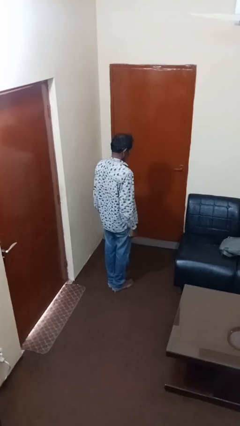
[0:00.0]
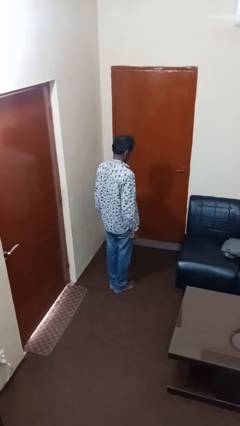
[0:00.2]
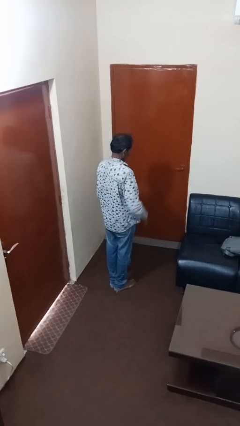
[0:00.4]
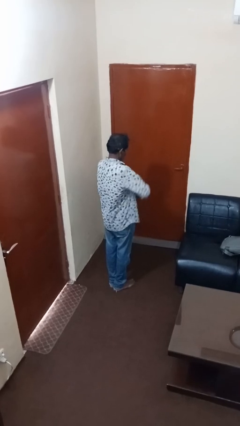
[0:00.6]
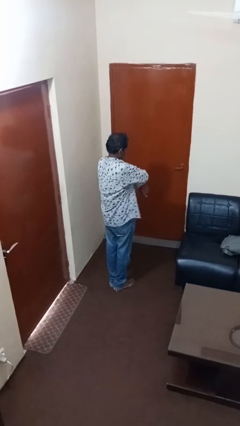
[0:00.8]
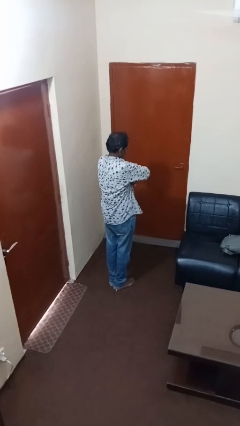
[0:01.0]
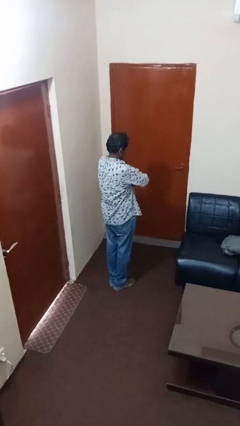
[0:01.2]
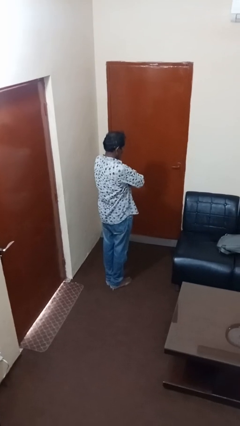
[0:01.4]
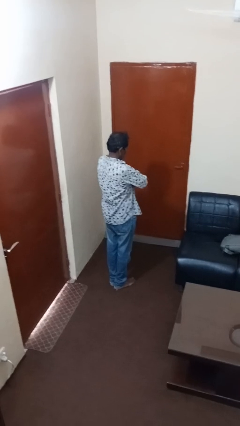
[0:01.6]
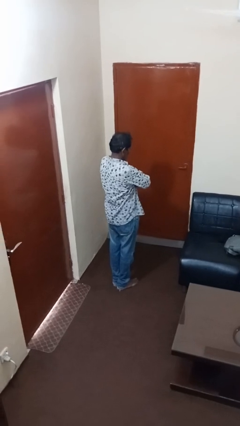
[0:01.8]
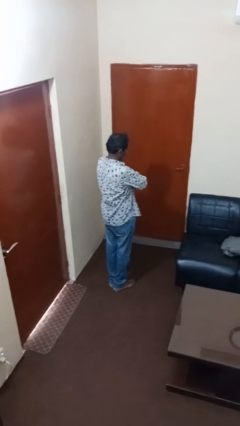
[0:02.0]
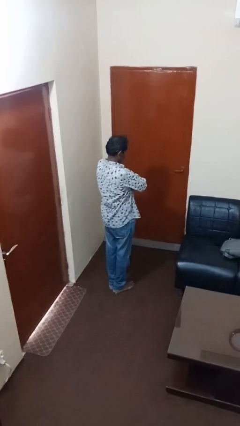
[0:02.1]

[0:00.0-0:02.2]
person crosses arms

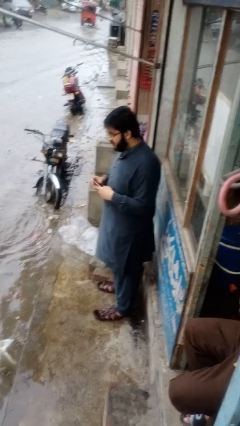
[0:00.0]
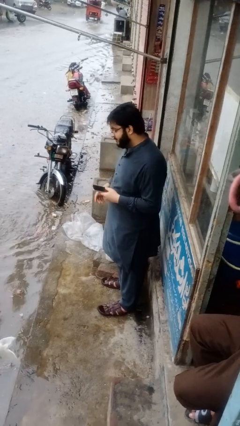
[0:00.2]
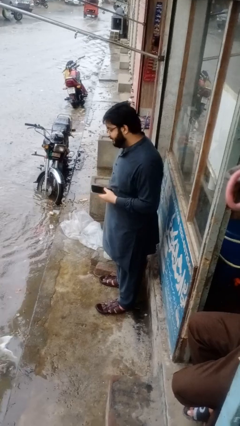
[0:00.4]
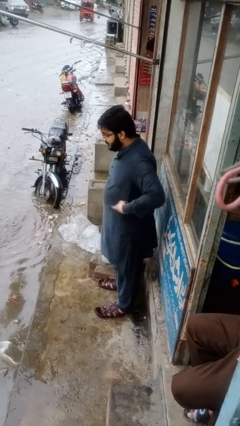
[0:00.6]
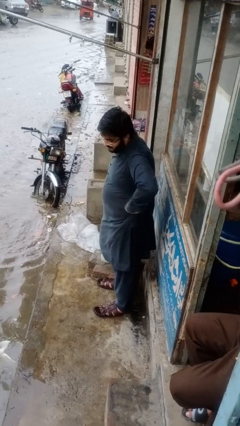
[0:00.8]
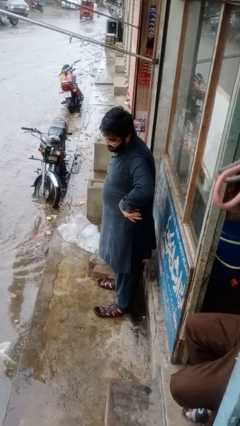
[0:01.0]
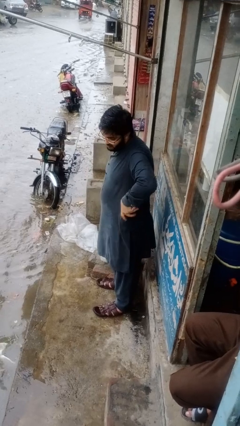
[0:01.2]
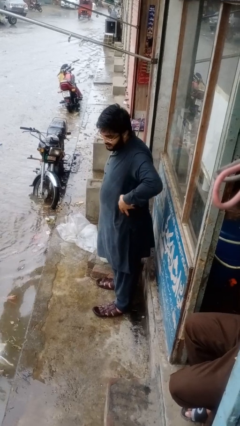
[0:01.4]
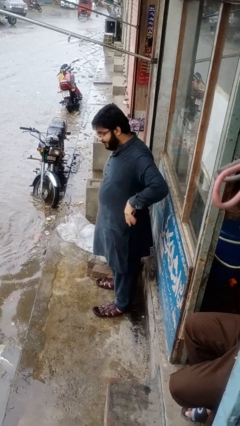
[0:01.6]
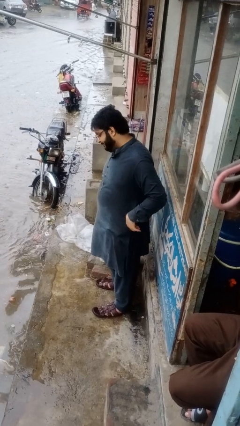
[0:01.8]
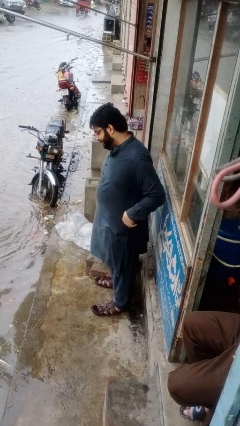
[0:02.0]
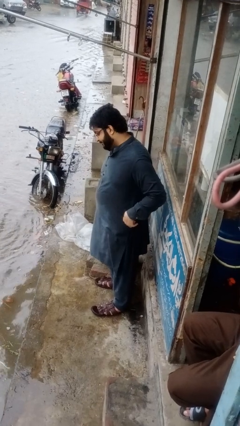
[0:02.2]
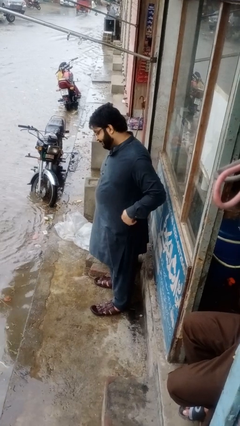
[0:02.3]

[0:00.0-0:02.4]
person puts phone into pocket

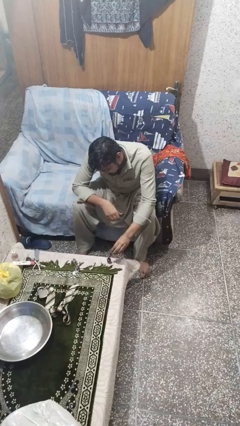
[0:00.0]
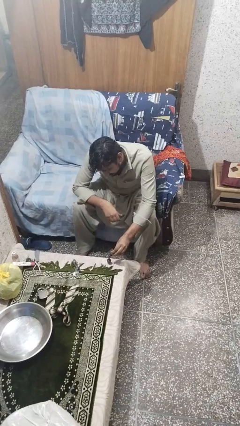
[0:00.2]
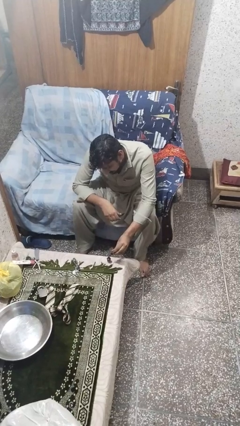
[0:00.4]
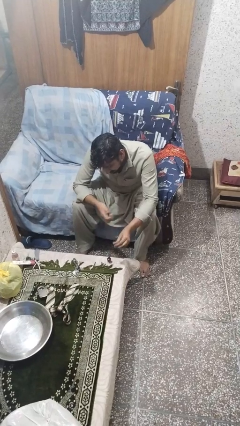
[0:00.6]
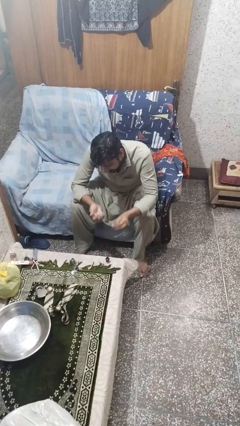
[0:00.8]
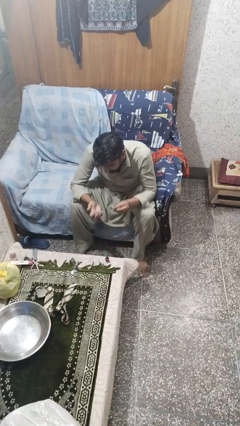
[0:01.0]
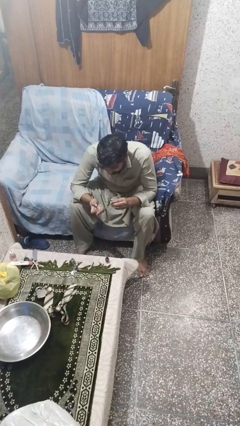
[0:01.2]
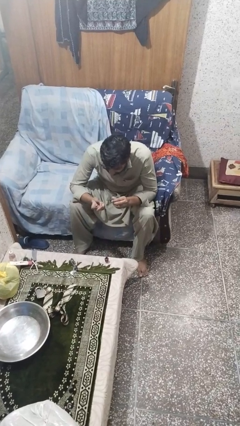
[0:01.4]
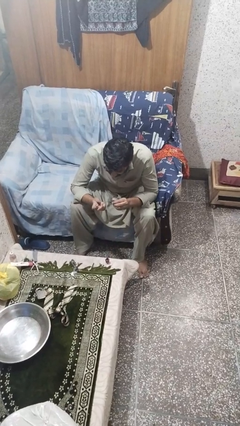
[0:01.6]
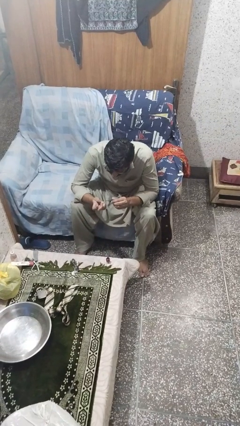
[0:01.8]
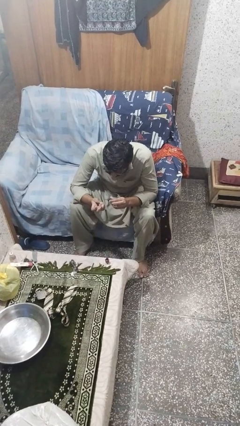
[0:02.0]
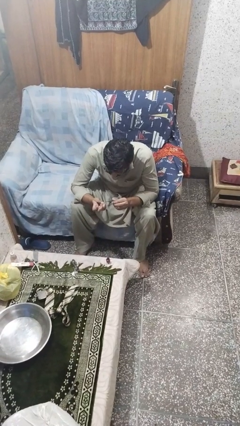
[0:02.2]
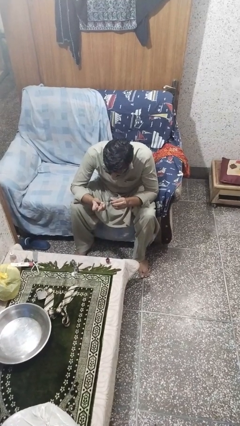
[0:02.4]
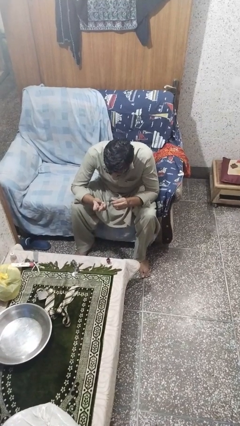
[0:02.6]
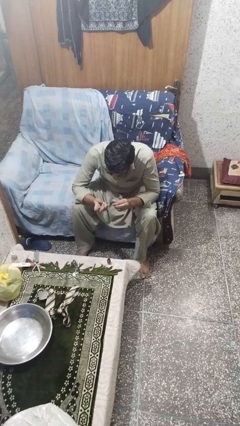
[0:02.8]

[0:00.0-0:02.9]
person paints fingernails

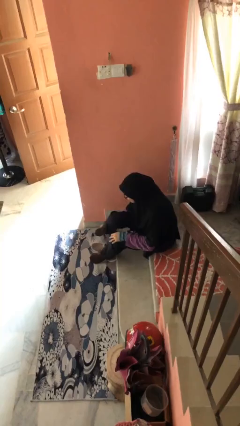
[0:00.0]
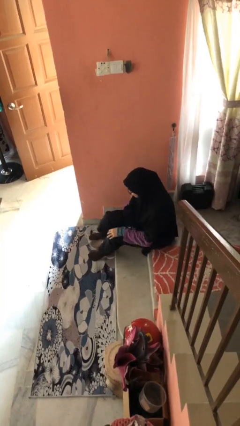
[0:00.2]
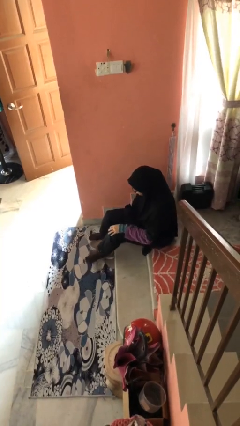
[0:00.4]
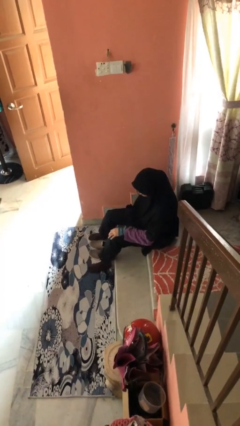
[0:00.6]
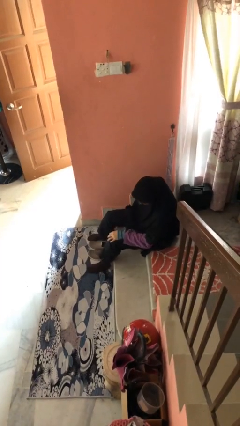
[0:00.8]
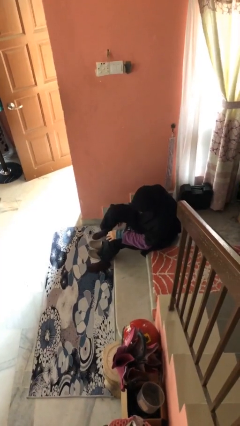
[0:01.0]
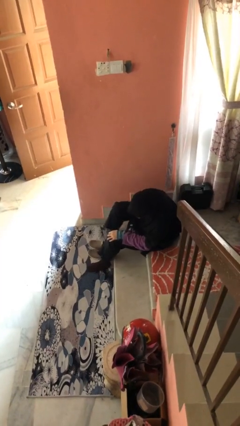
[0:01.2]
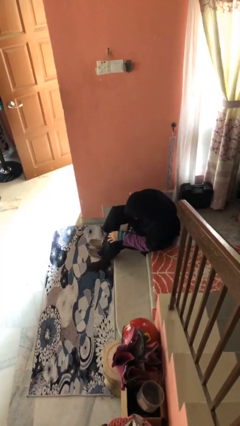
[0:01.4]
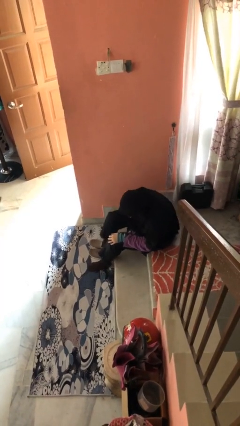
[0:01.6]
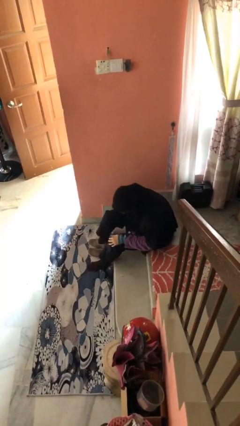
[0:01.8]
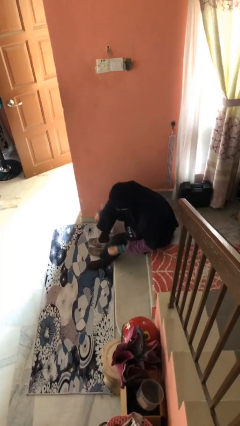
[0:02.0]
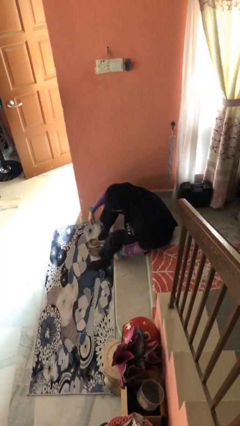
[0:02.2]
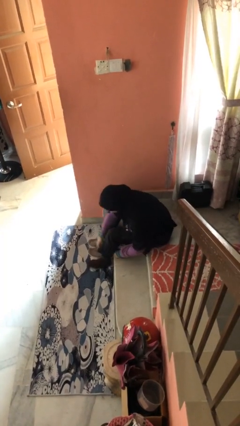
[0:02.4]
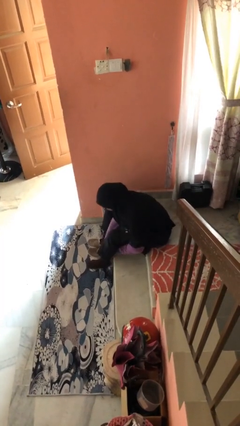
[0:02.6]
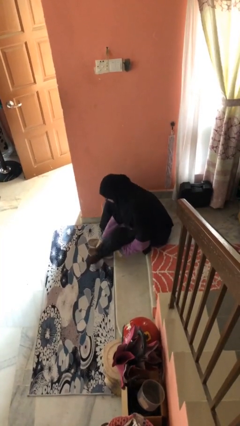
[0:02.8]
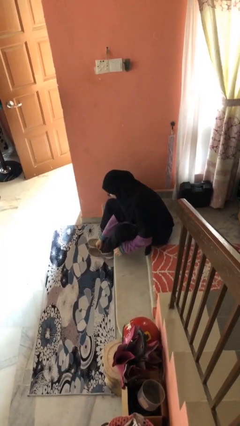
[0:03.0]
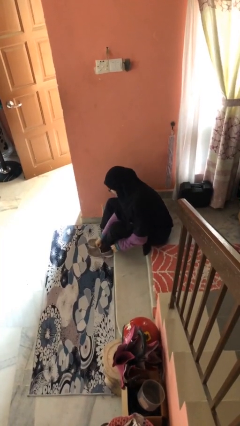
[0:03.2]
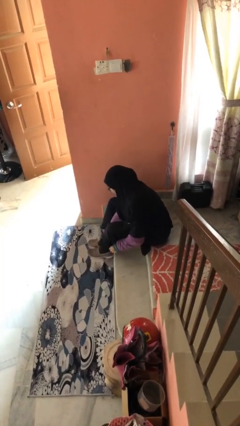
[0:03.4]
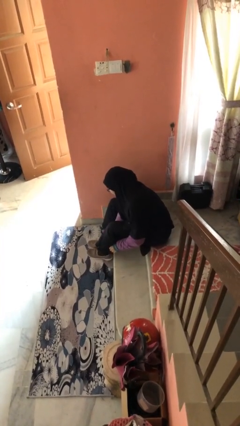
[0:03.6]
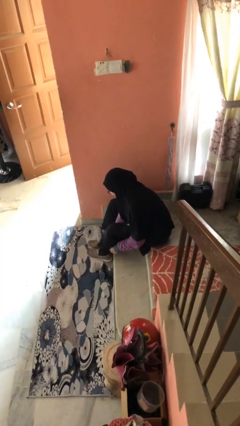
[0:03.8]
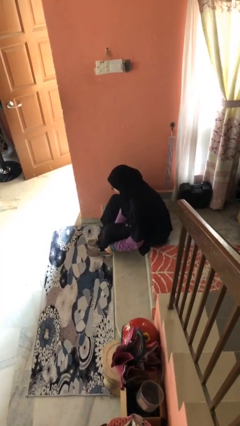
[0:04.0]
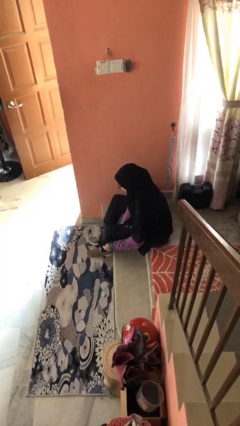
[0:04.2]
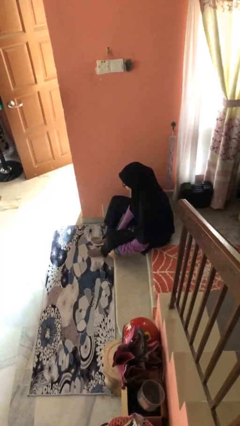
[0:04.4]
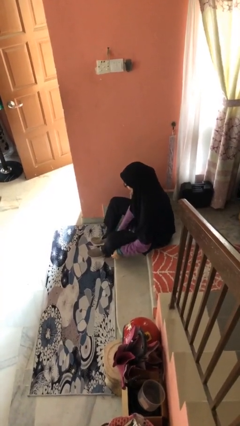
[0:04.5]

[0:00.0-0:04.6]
person puts on shoes

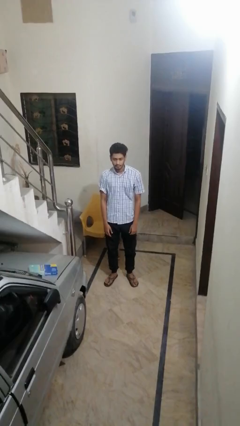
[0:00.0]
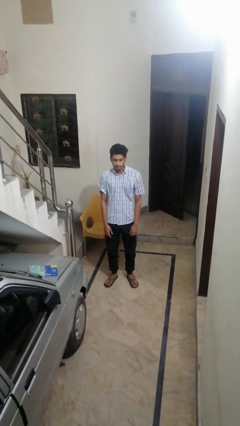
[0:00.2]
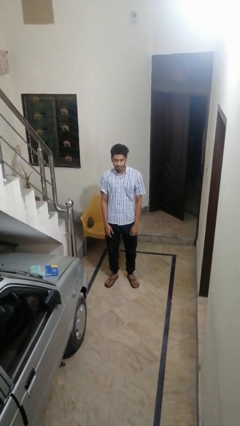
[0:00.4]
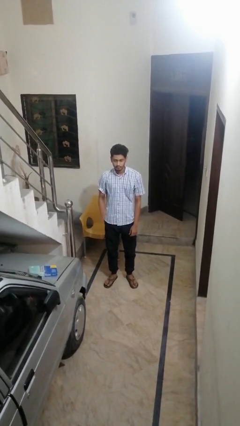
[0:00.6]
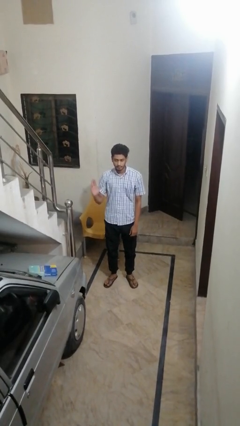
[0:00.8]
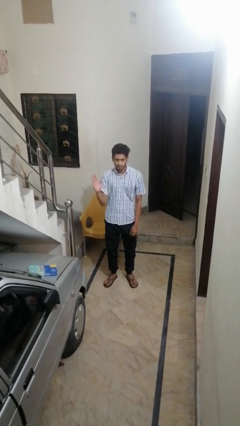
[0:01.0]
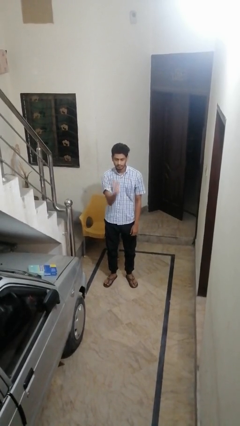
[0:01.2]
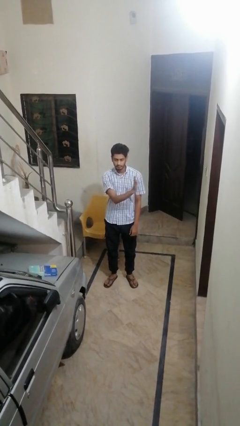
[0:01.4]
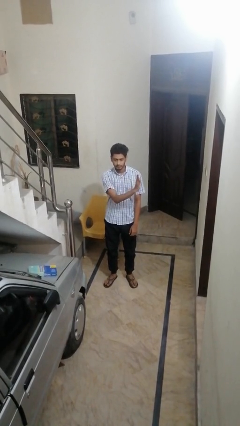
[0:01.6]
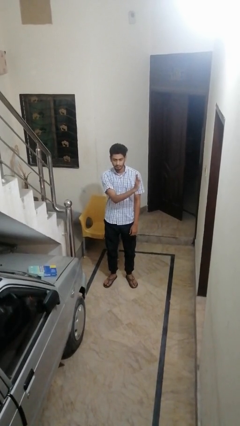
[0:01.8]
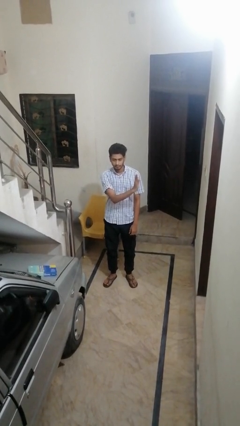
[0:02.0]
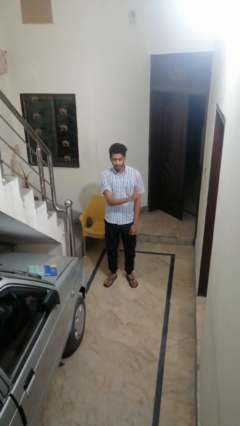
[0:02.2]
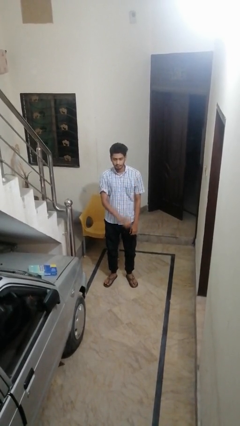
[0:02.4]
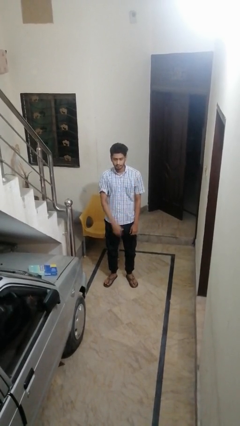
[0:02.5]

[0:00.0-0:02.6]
person gestures swipe left

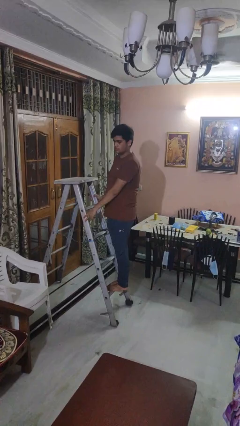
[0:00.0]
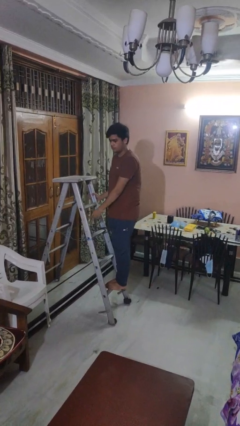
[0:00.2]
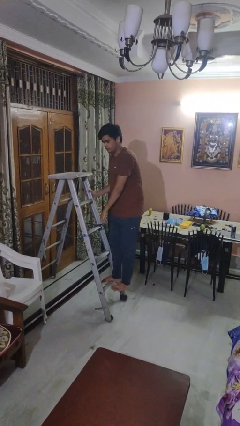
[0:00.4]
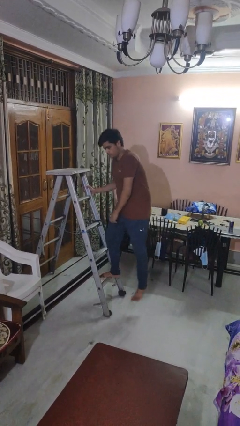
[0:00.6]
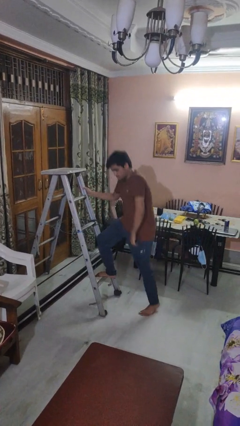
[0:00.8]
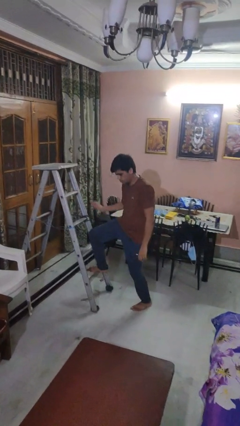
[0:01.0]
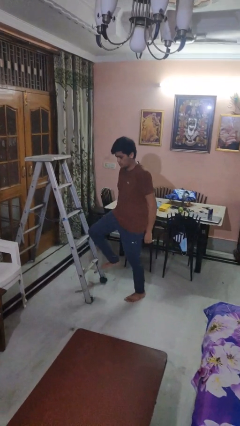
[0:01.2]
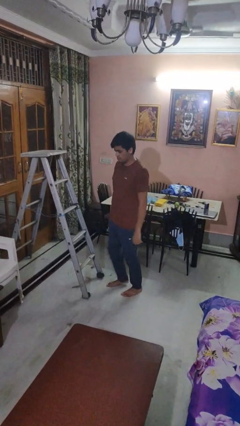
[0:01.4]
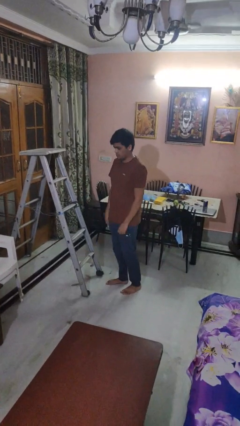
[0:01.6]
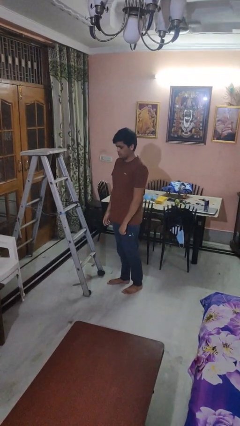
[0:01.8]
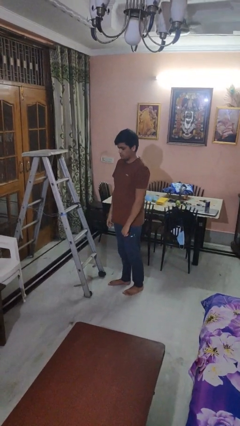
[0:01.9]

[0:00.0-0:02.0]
person climbs down ladder

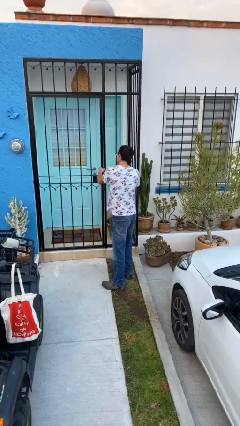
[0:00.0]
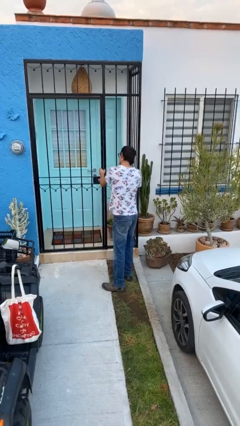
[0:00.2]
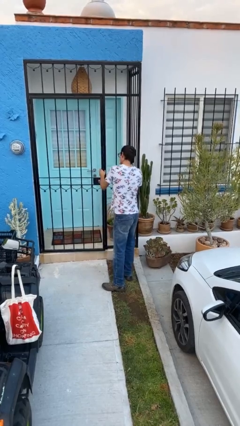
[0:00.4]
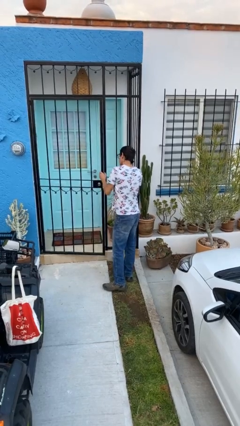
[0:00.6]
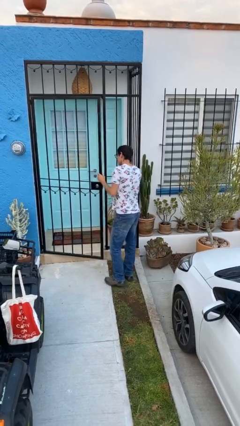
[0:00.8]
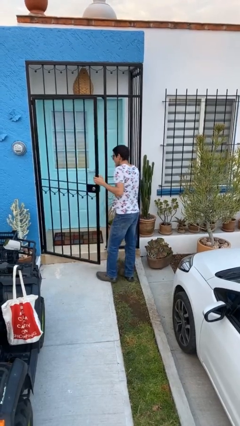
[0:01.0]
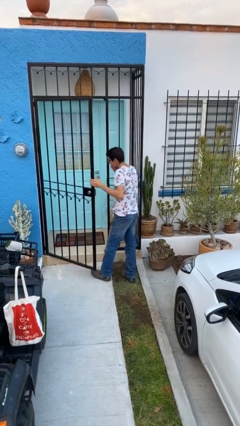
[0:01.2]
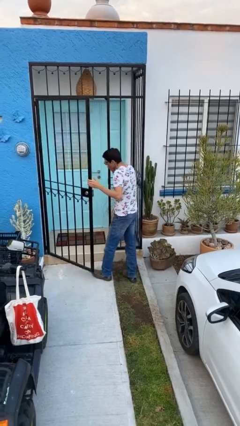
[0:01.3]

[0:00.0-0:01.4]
person opens facility door
